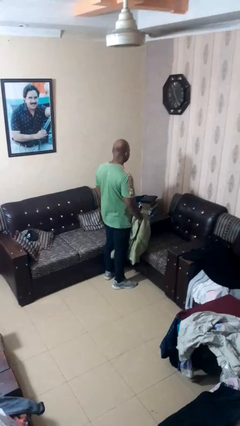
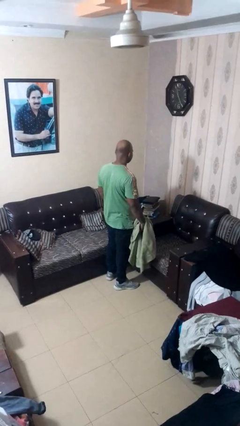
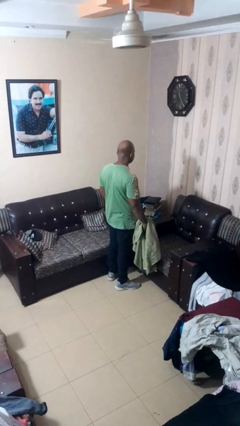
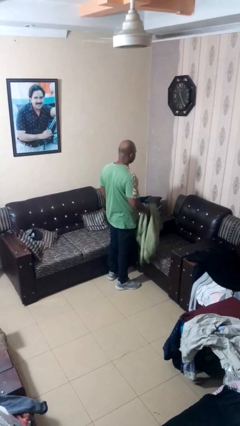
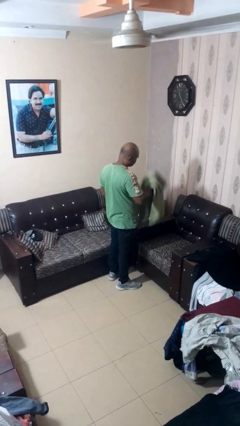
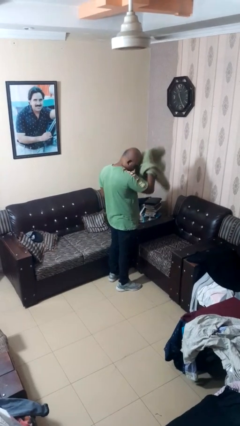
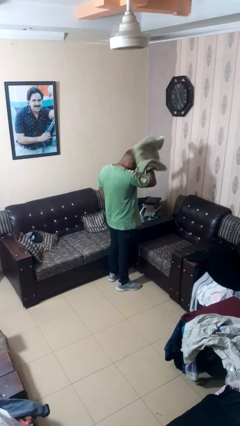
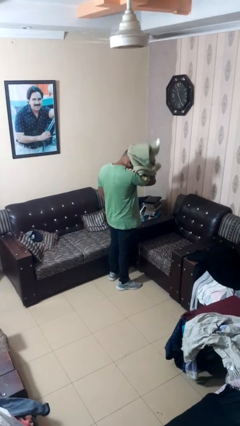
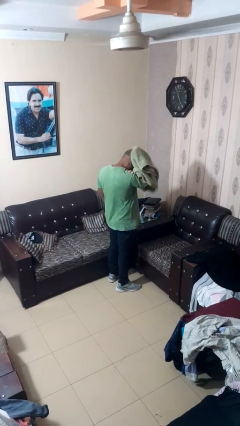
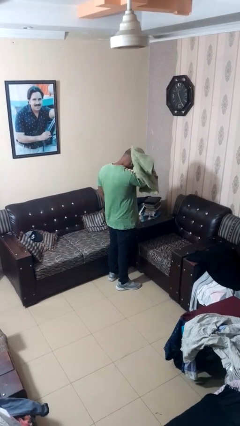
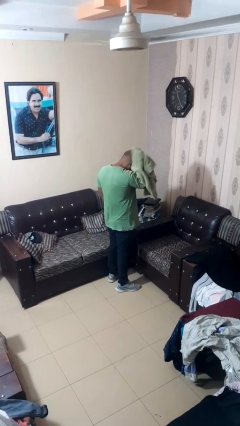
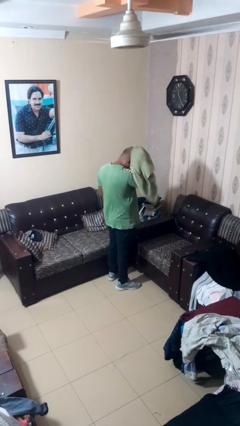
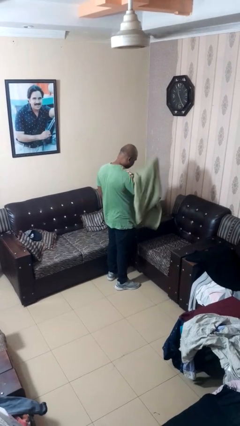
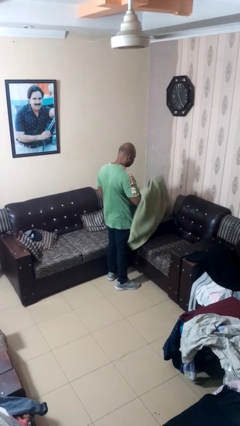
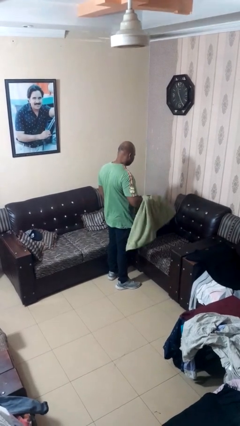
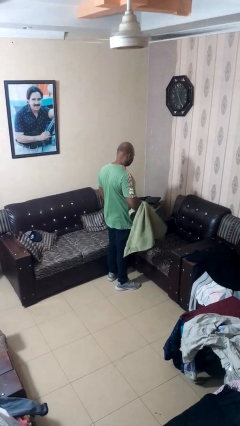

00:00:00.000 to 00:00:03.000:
person dries hair with towel

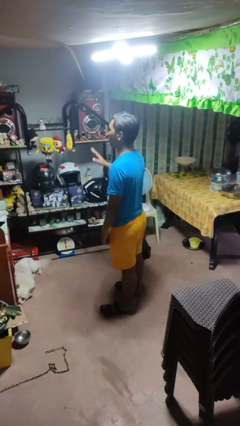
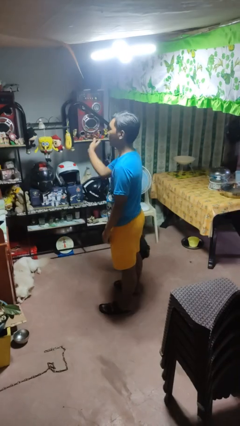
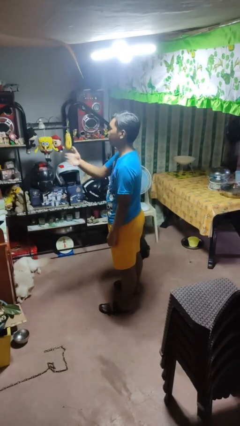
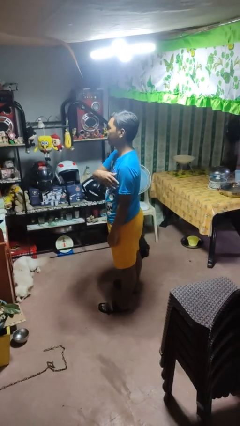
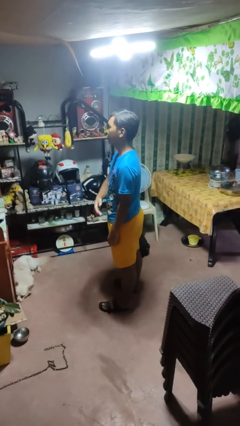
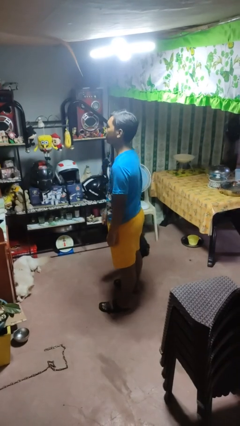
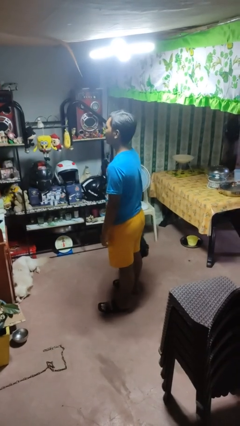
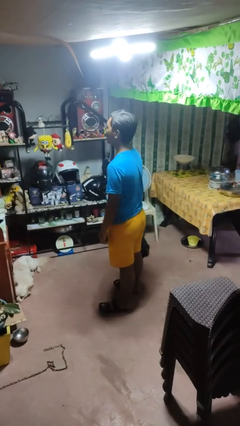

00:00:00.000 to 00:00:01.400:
person gestures swipe left

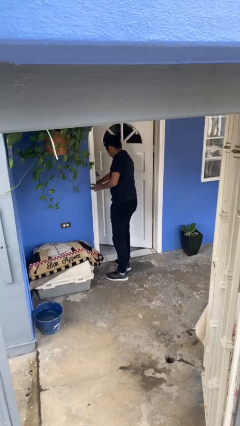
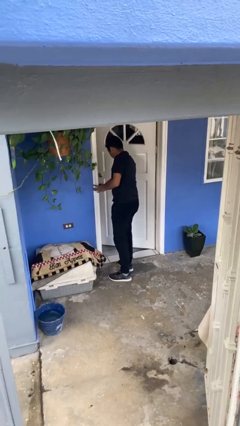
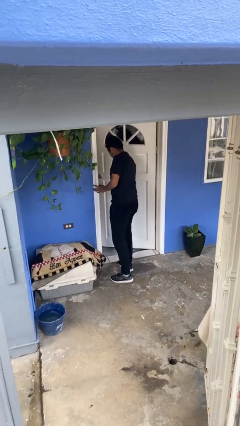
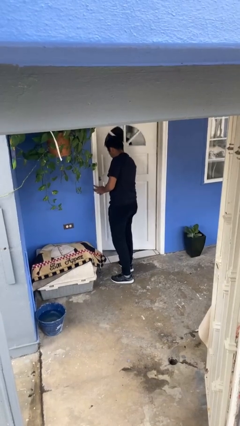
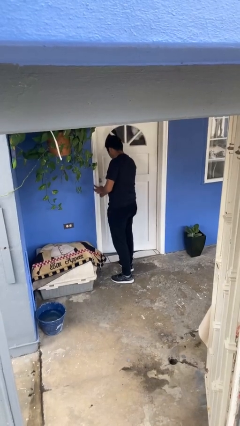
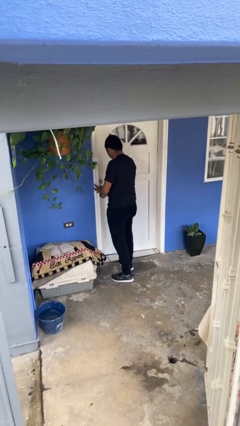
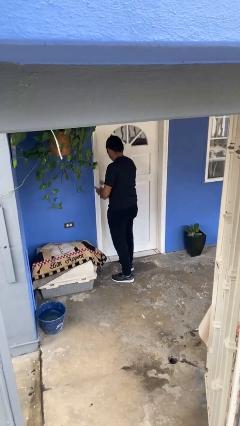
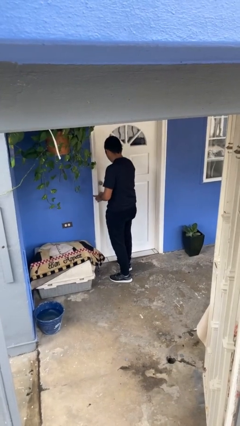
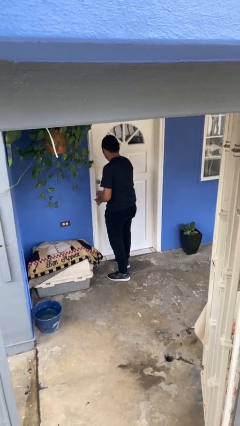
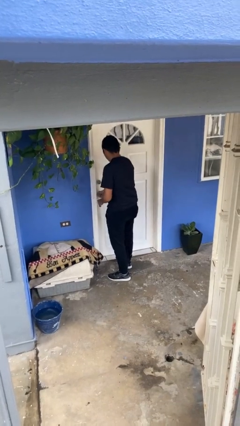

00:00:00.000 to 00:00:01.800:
person closes facility door

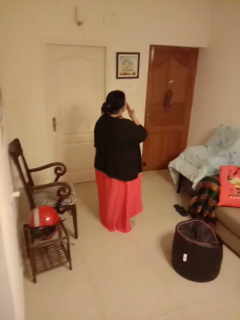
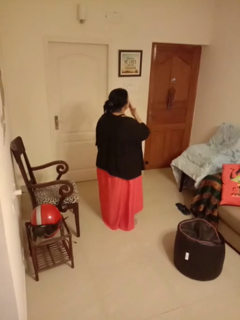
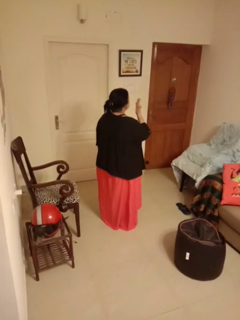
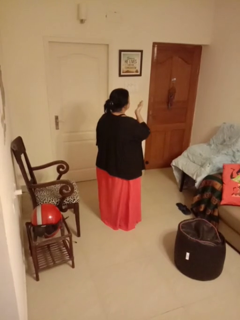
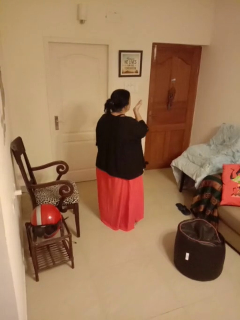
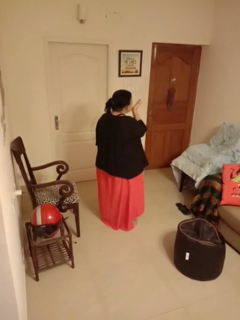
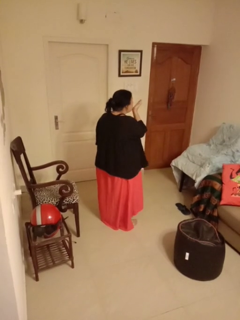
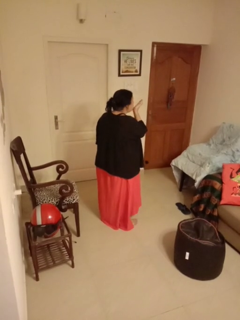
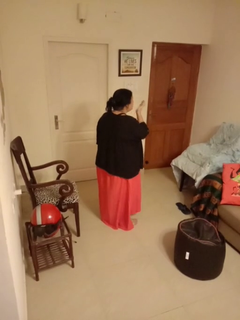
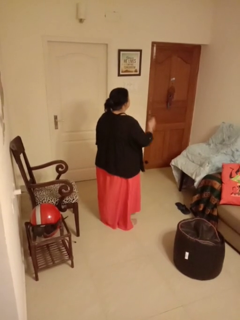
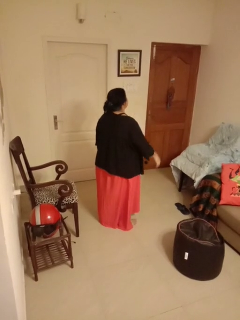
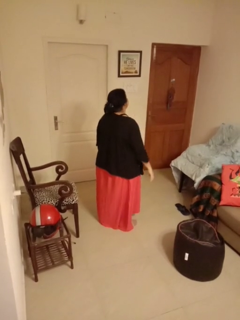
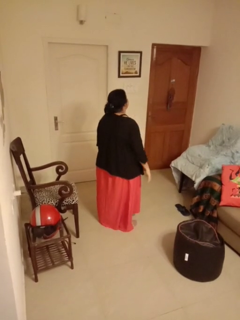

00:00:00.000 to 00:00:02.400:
person gestures blow kiss

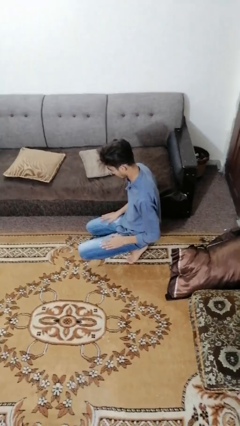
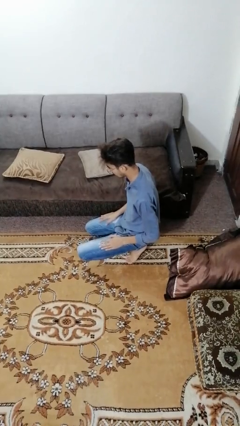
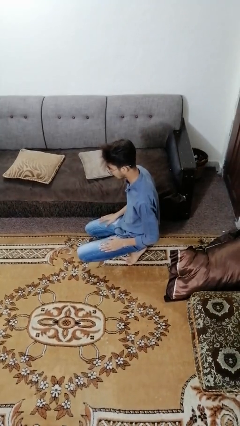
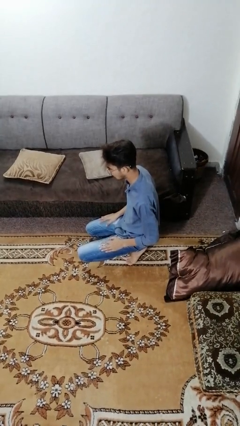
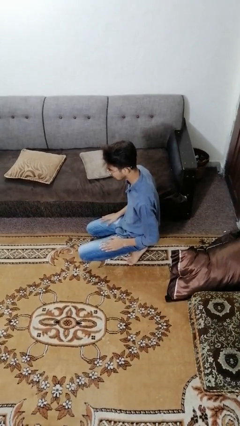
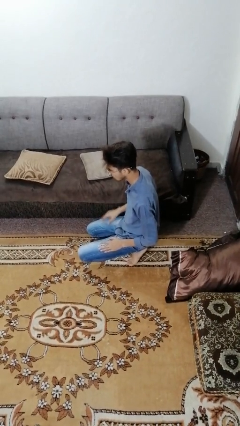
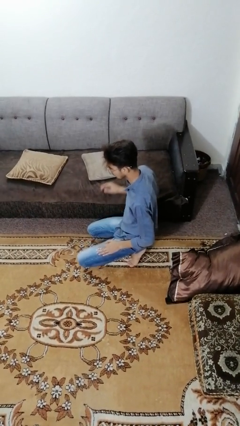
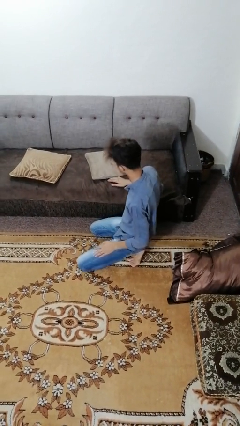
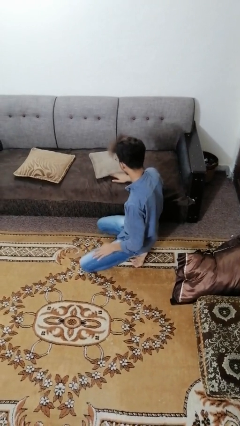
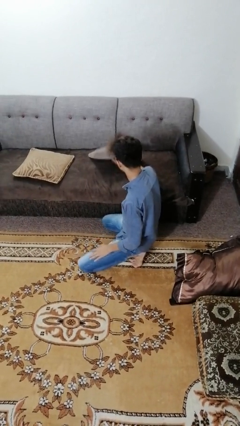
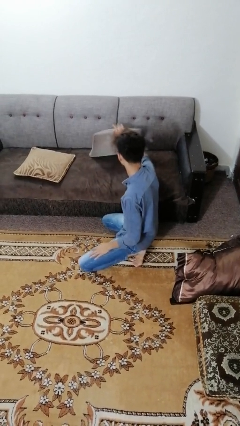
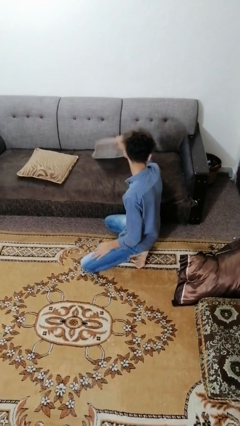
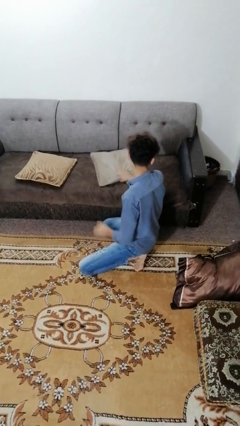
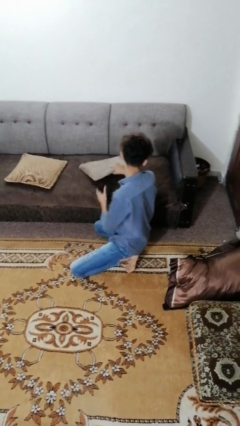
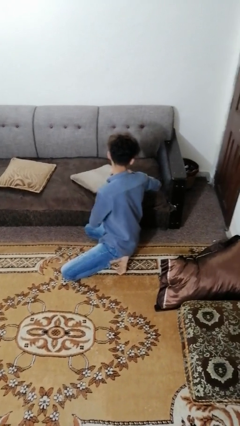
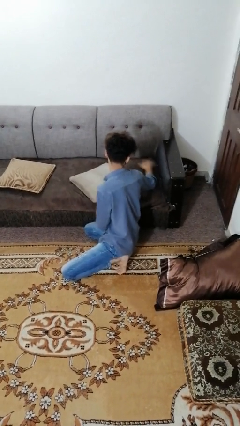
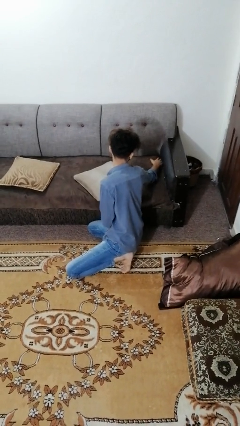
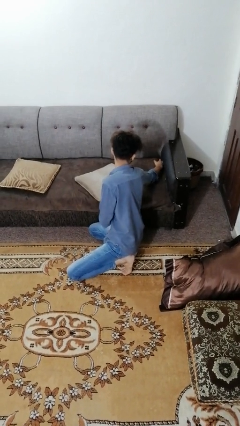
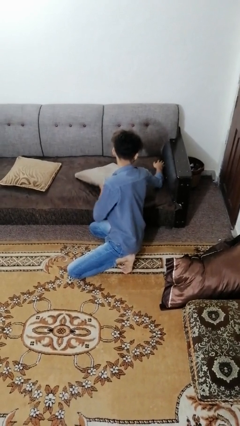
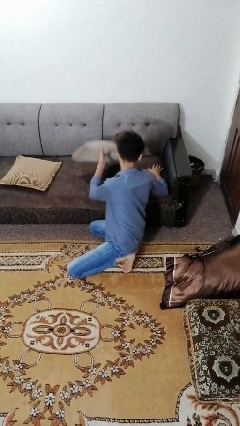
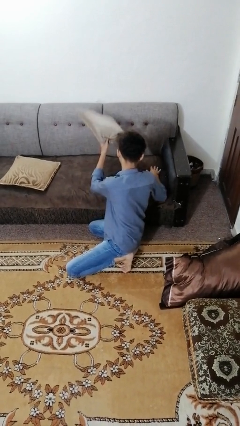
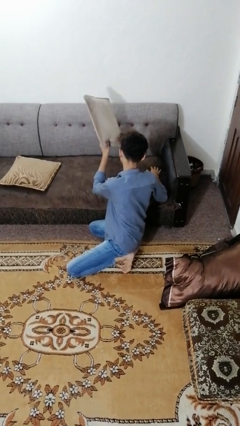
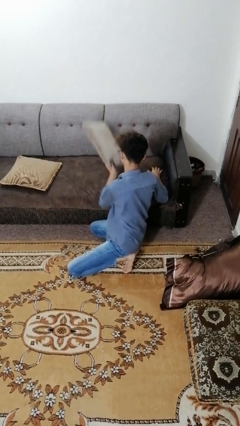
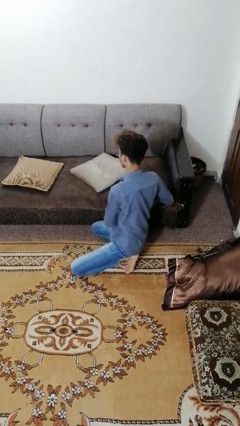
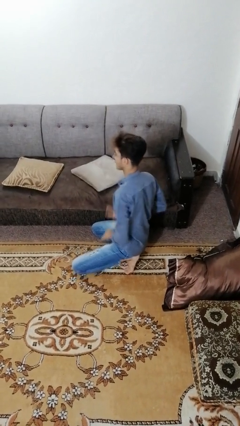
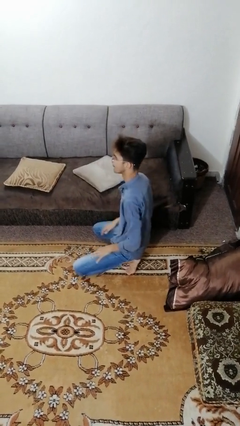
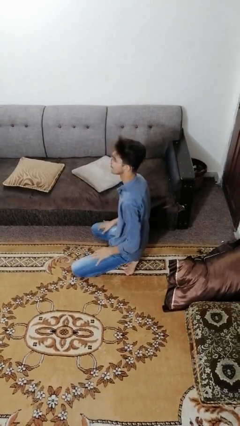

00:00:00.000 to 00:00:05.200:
person searches in couch

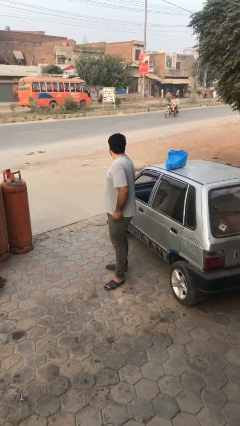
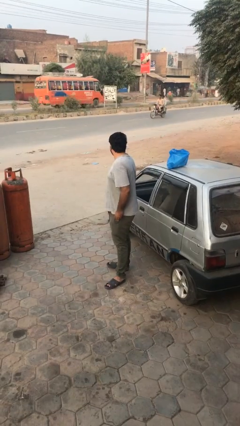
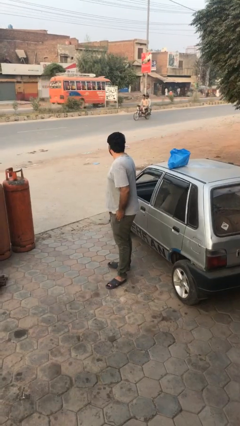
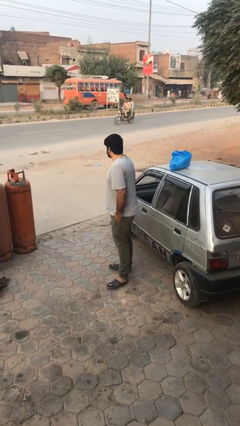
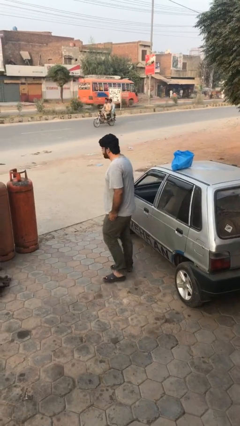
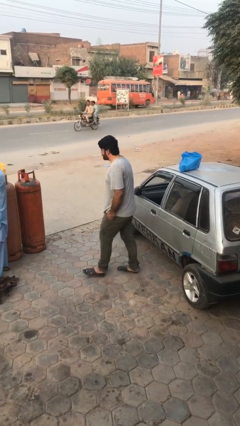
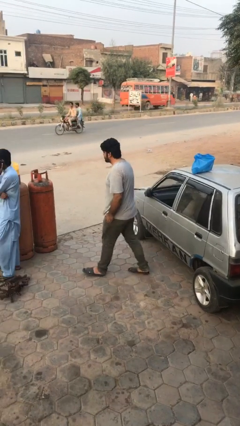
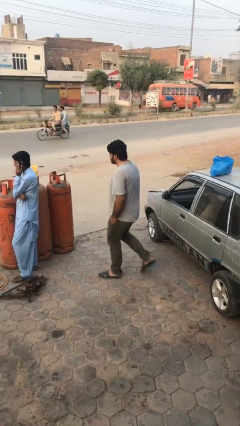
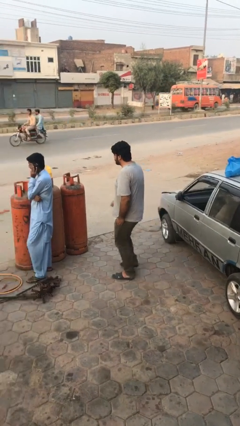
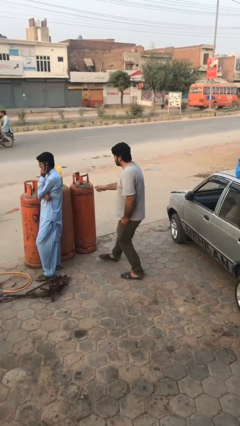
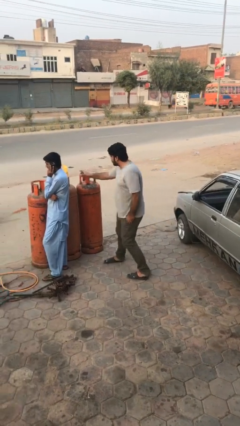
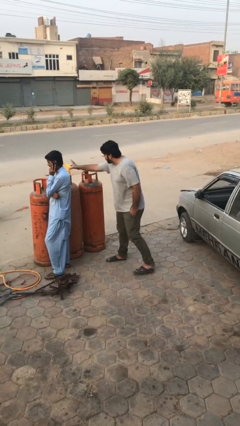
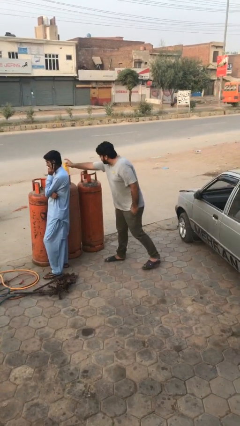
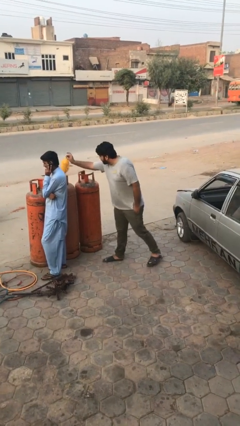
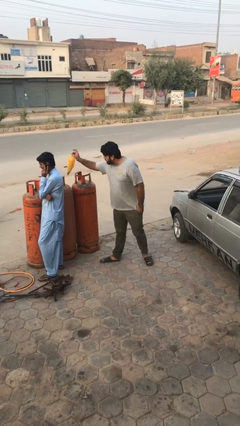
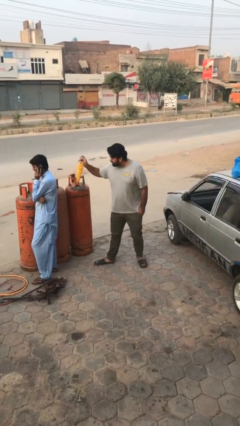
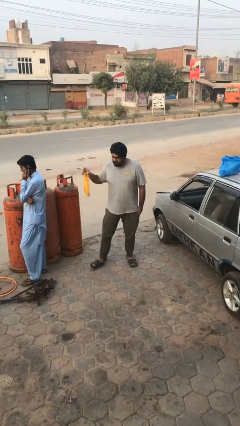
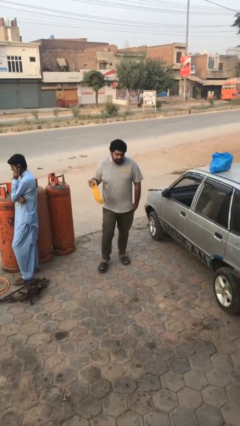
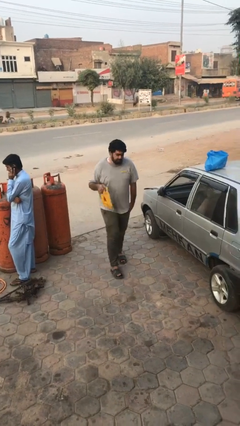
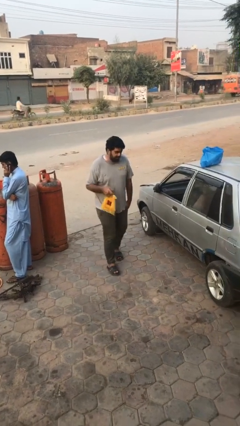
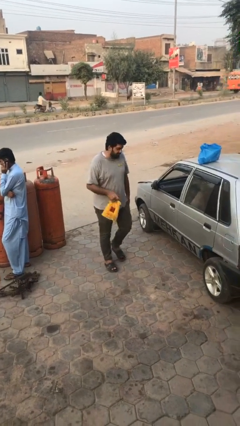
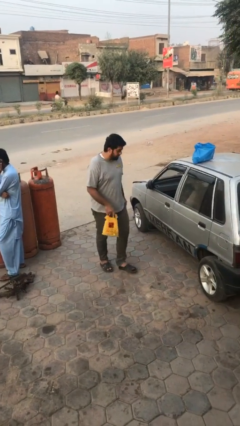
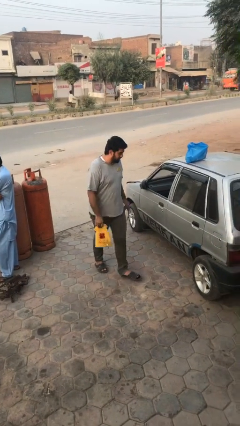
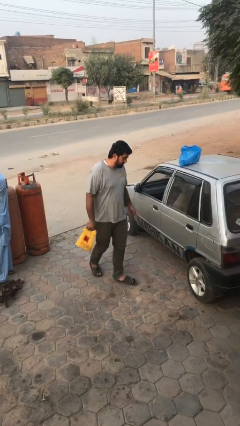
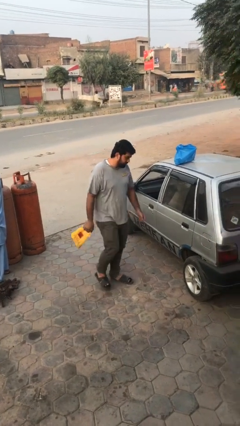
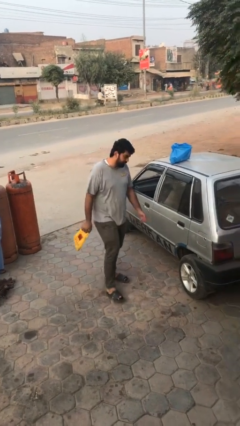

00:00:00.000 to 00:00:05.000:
person steals object from person
